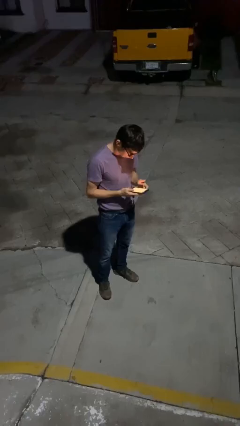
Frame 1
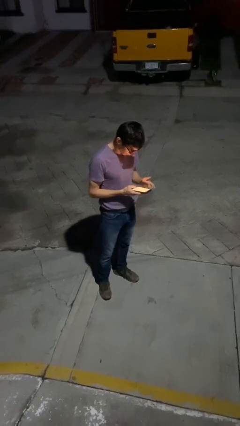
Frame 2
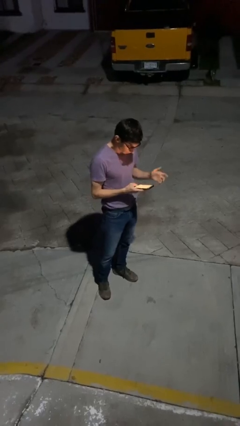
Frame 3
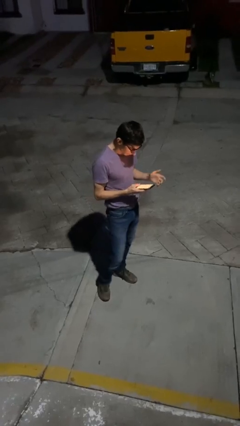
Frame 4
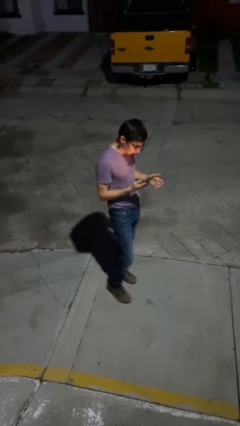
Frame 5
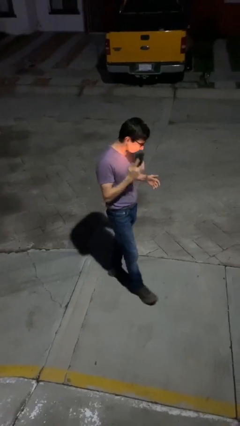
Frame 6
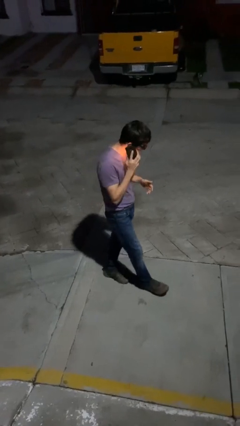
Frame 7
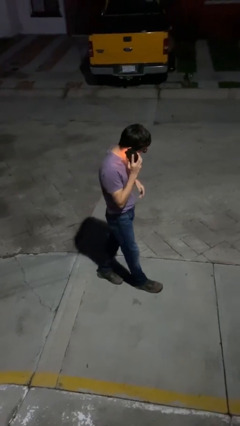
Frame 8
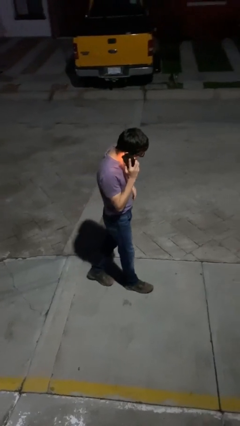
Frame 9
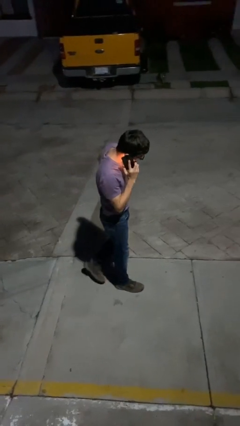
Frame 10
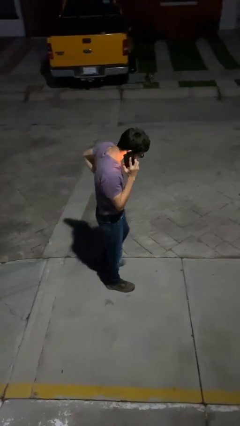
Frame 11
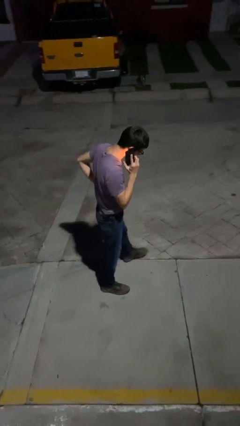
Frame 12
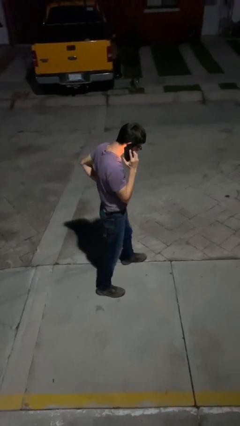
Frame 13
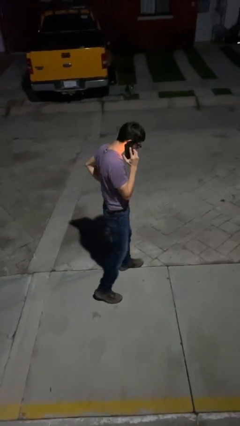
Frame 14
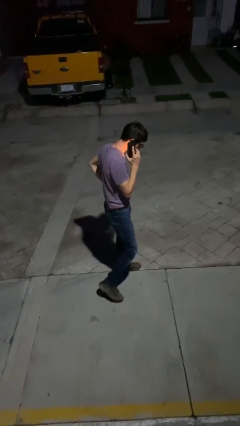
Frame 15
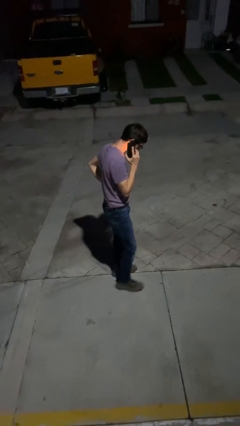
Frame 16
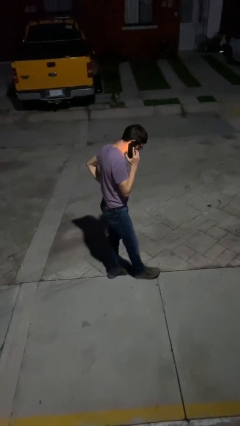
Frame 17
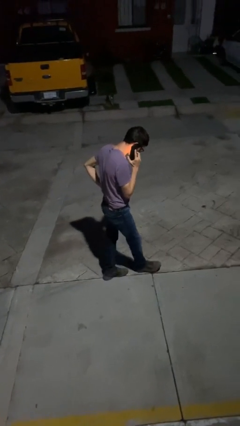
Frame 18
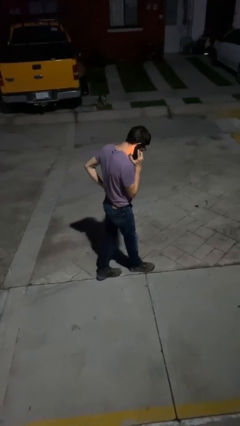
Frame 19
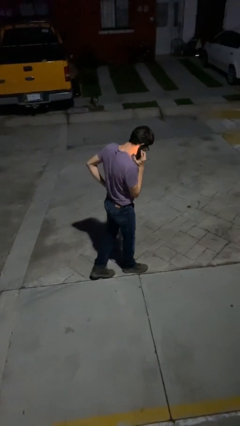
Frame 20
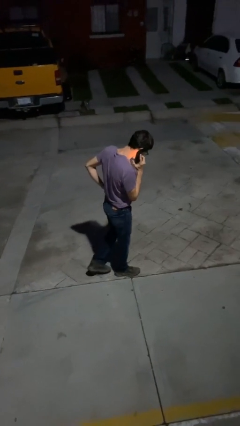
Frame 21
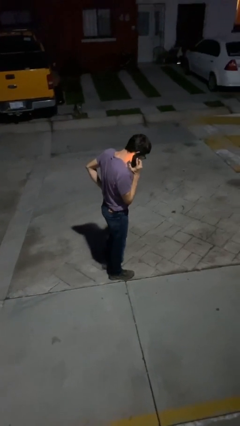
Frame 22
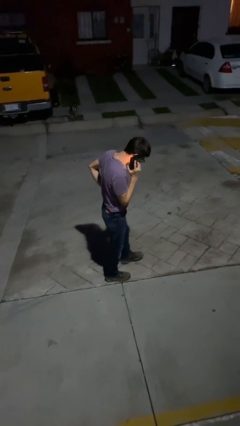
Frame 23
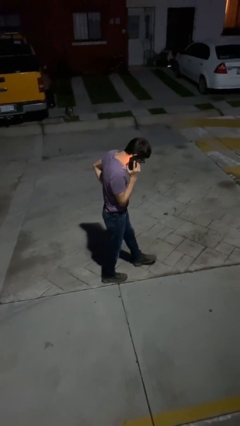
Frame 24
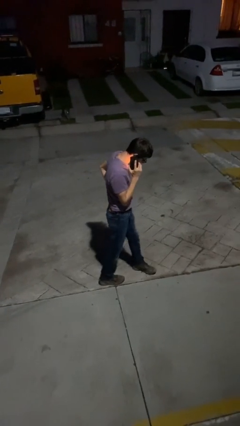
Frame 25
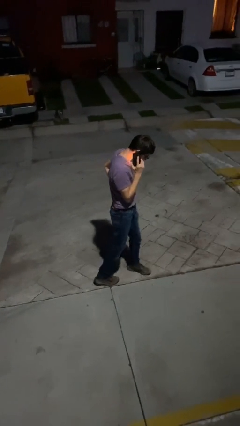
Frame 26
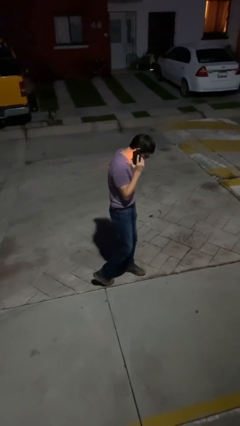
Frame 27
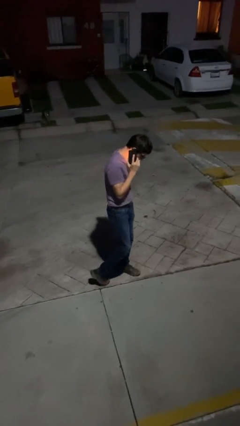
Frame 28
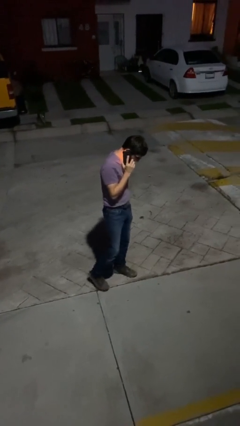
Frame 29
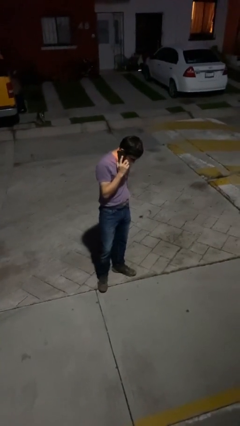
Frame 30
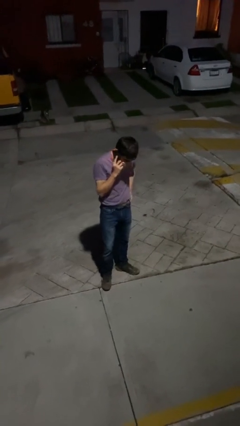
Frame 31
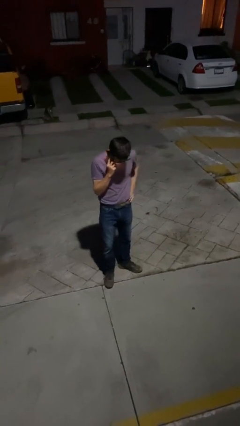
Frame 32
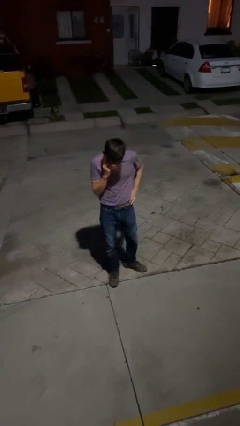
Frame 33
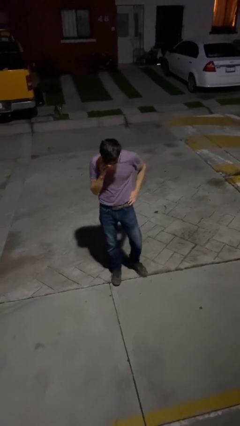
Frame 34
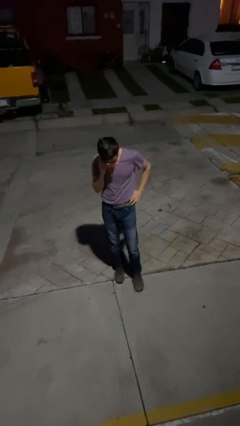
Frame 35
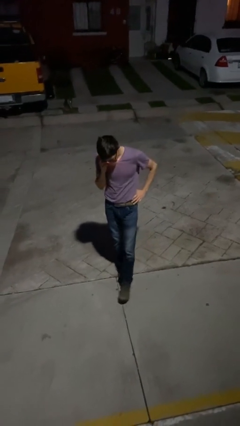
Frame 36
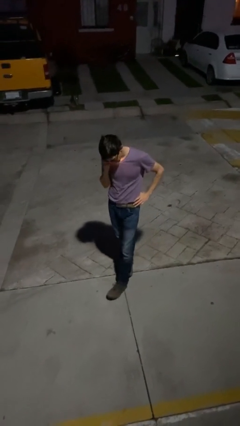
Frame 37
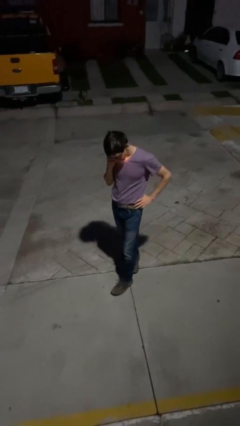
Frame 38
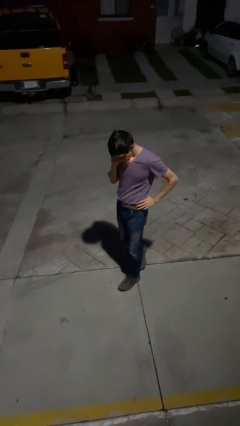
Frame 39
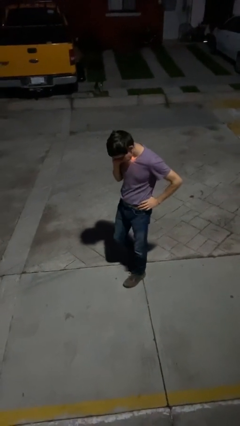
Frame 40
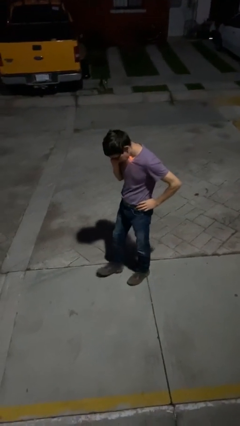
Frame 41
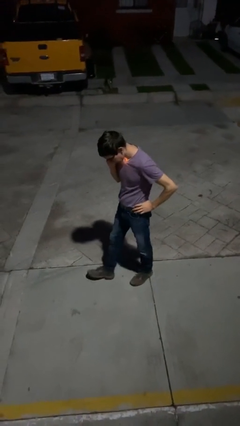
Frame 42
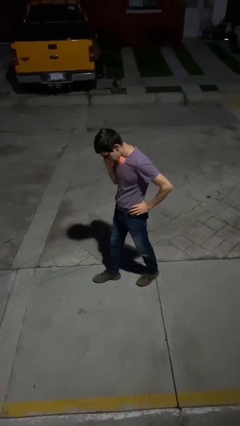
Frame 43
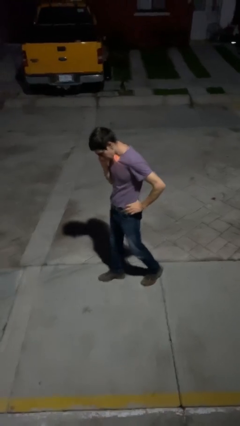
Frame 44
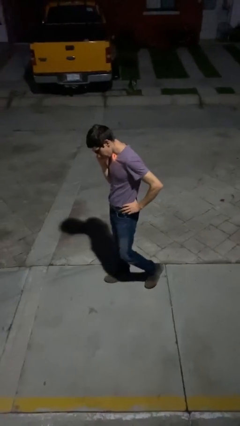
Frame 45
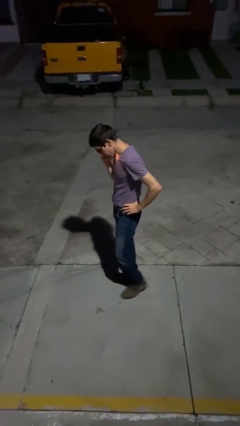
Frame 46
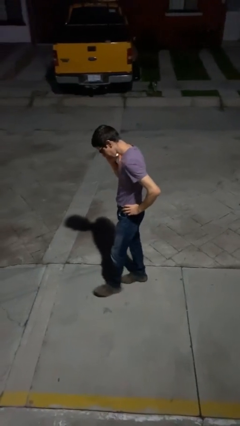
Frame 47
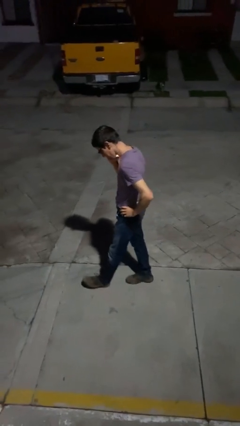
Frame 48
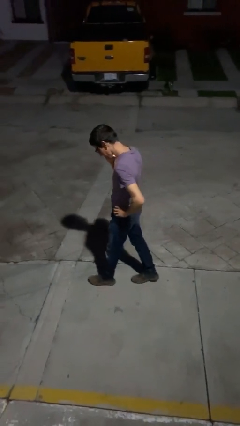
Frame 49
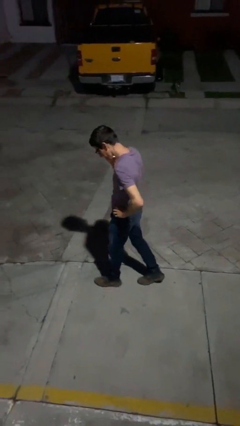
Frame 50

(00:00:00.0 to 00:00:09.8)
person talks on phone

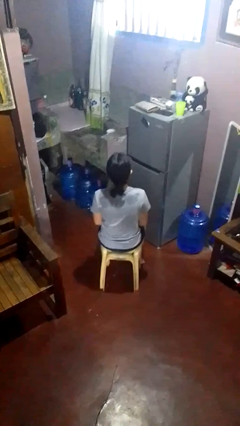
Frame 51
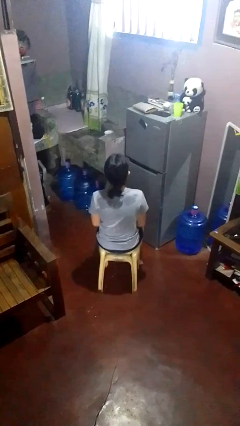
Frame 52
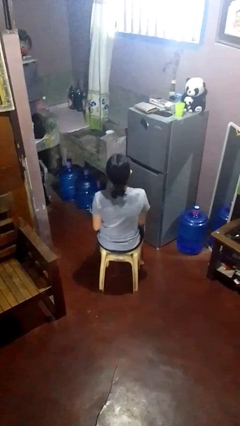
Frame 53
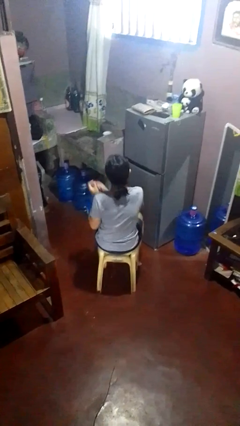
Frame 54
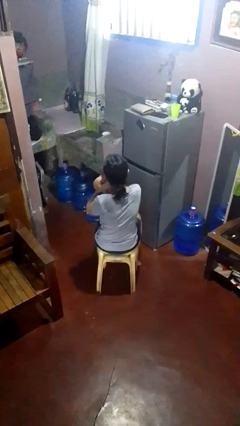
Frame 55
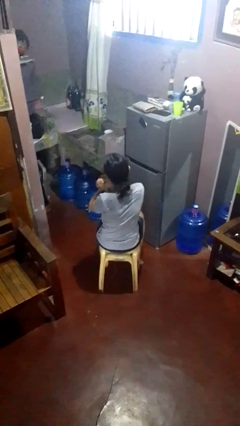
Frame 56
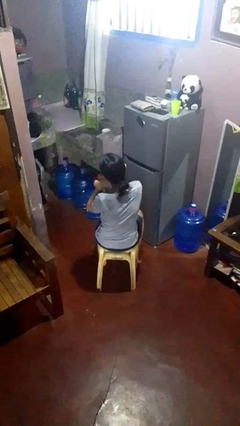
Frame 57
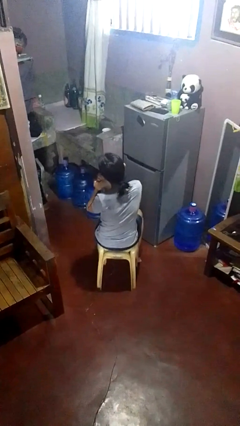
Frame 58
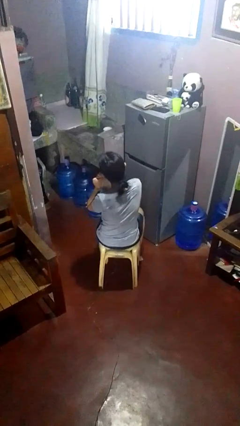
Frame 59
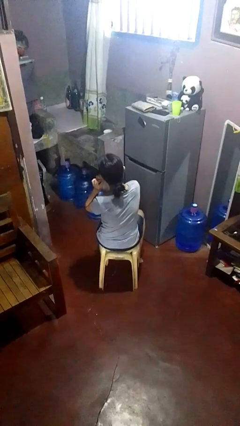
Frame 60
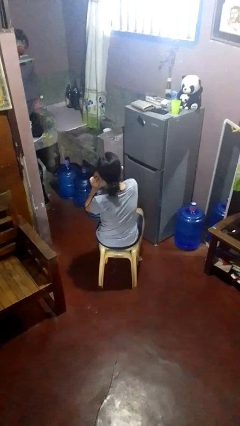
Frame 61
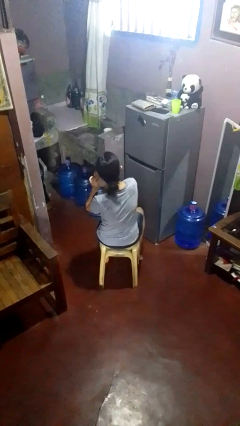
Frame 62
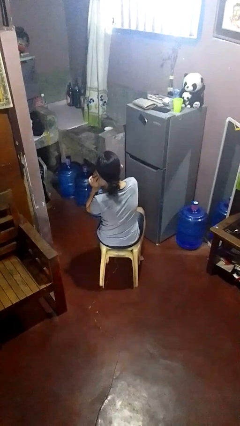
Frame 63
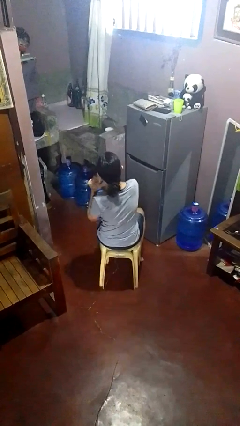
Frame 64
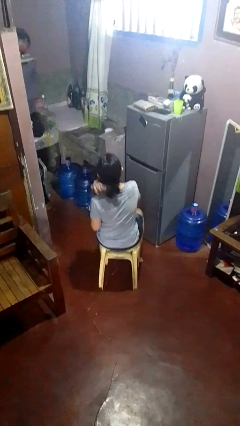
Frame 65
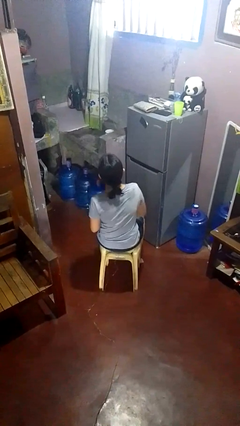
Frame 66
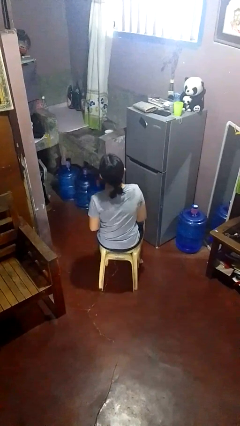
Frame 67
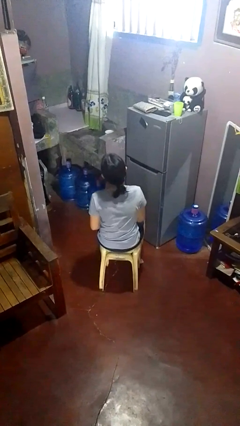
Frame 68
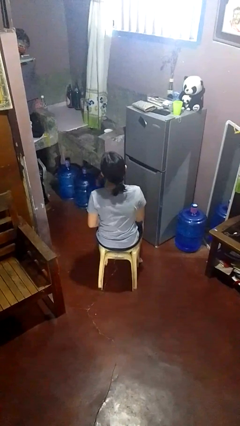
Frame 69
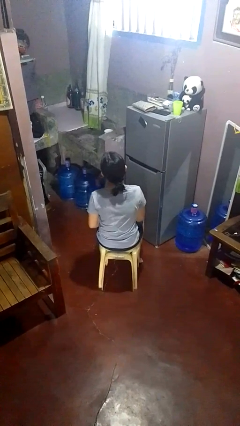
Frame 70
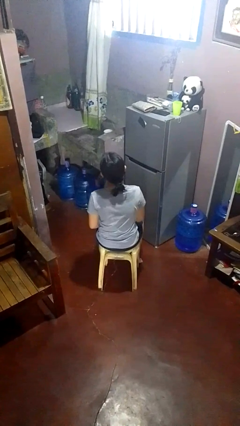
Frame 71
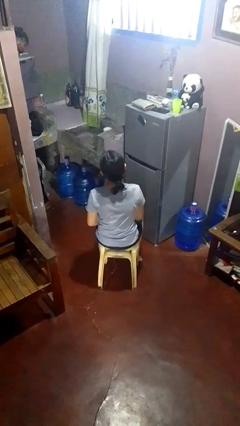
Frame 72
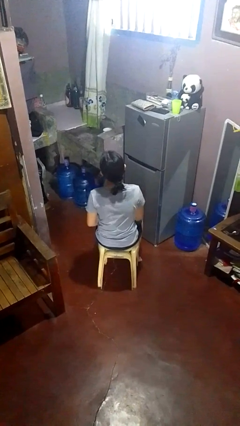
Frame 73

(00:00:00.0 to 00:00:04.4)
person puts on earrings

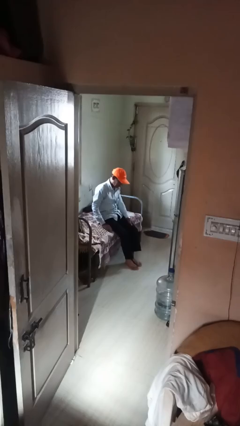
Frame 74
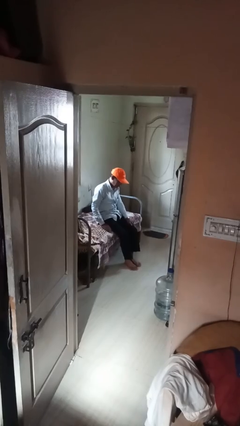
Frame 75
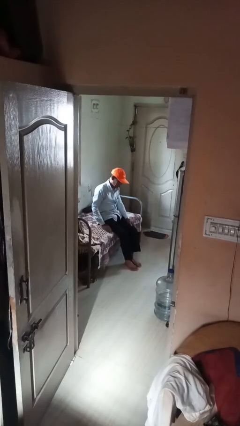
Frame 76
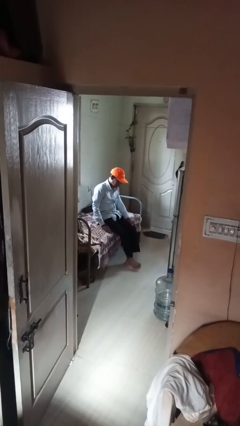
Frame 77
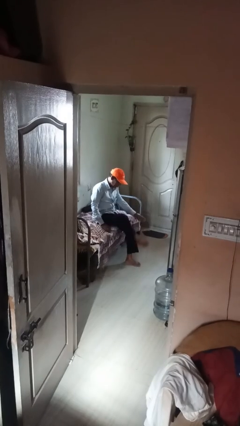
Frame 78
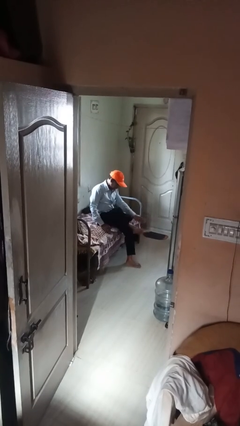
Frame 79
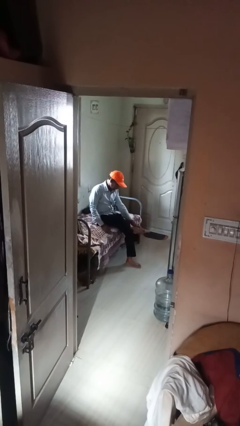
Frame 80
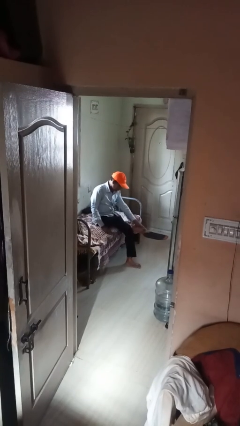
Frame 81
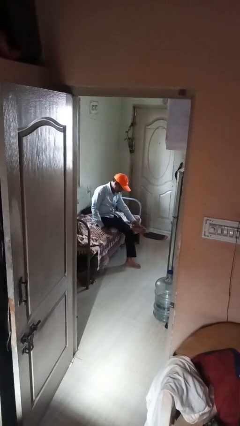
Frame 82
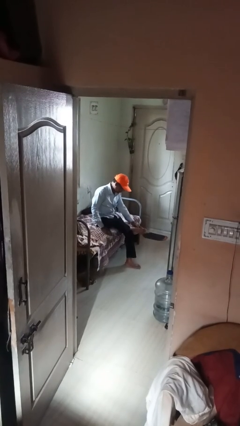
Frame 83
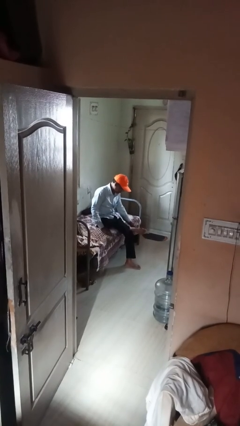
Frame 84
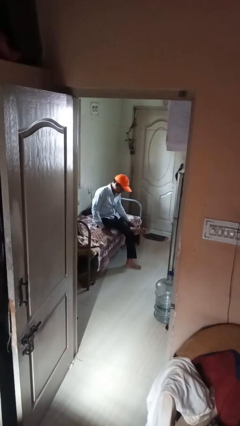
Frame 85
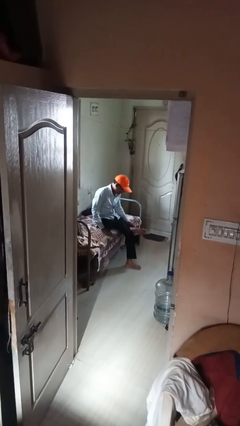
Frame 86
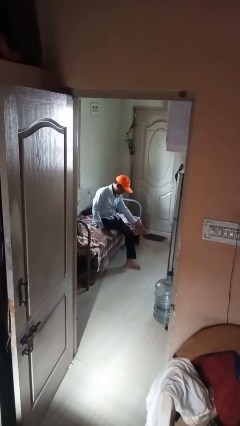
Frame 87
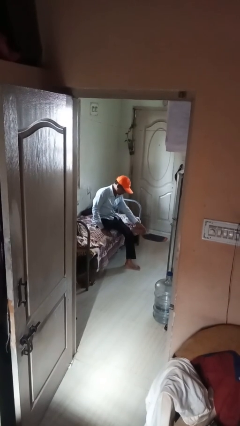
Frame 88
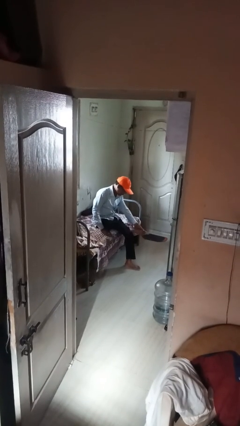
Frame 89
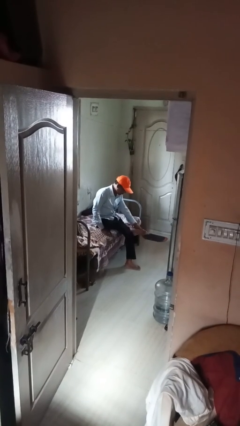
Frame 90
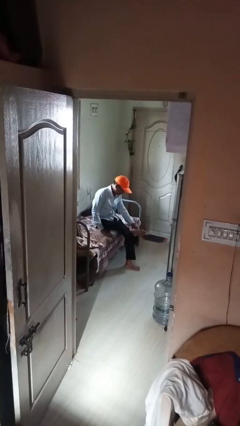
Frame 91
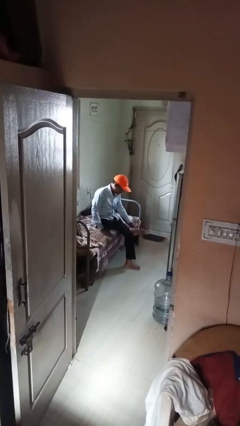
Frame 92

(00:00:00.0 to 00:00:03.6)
person rubs foot
